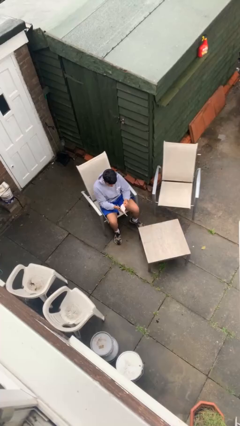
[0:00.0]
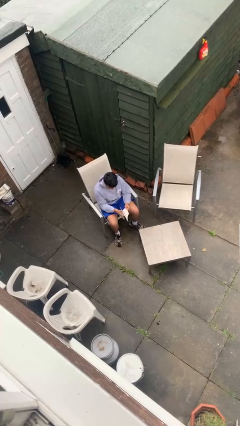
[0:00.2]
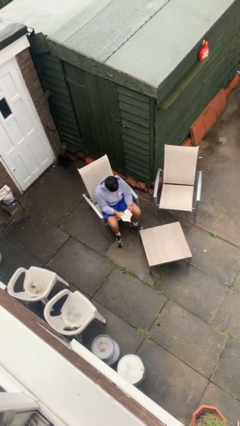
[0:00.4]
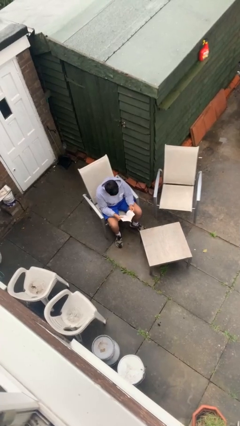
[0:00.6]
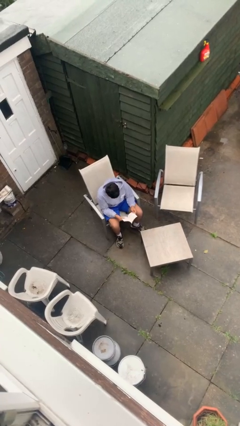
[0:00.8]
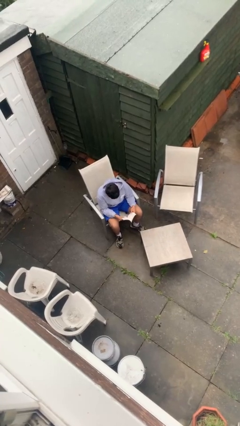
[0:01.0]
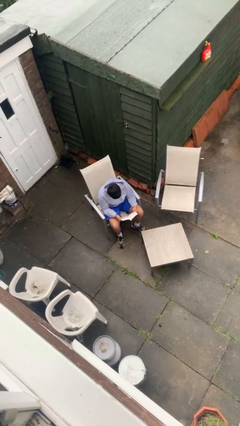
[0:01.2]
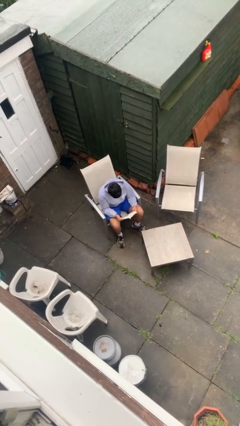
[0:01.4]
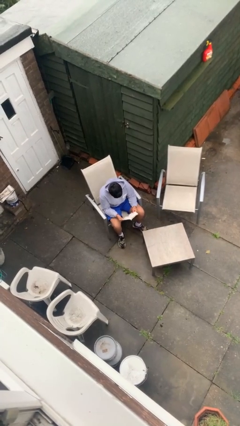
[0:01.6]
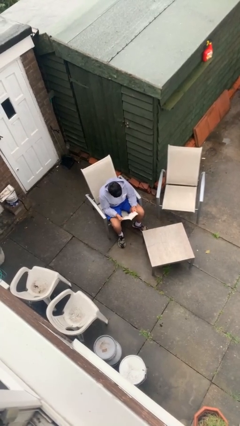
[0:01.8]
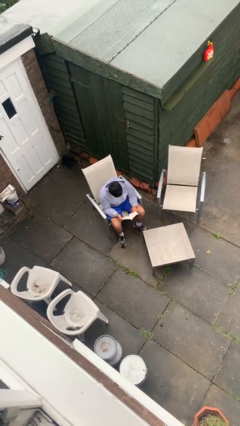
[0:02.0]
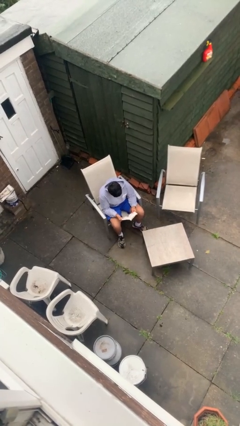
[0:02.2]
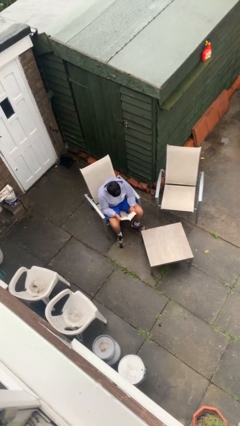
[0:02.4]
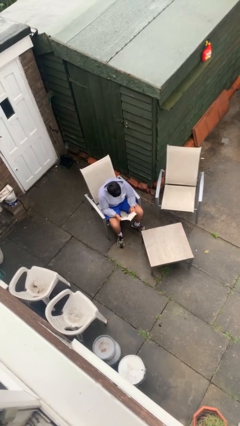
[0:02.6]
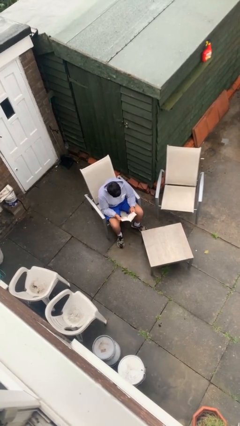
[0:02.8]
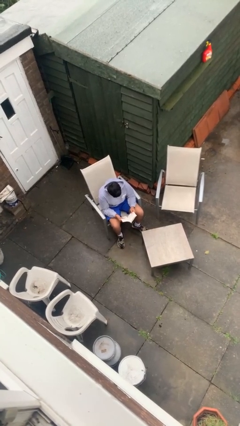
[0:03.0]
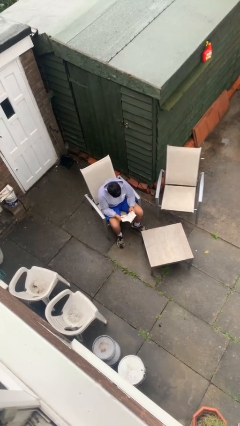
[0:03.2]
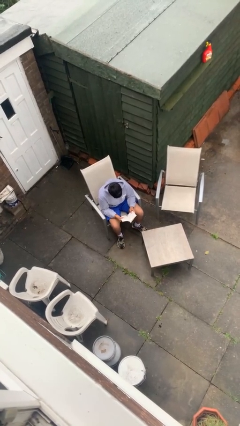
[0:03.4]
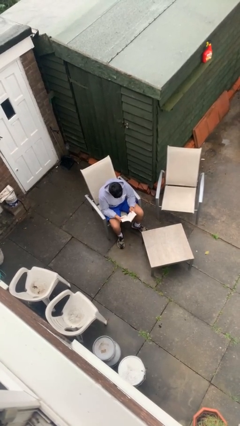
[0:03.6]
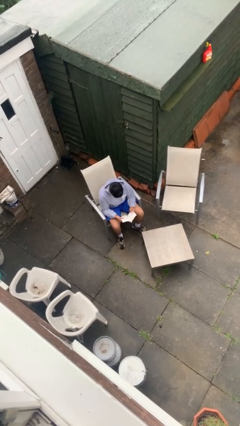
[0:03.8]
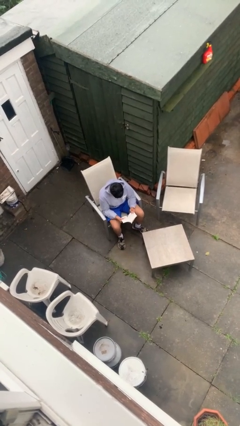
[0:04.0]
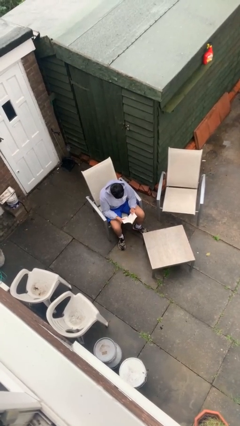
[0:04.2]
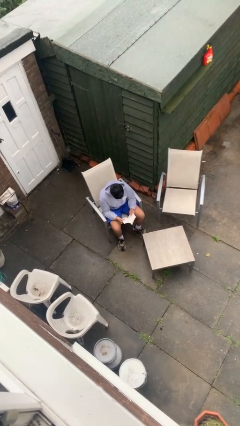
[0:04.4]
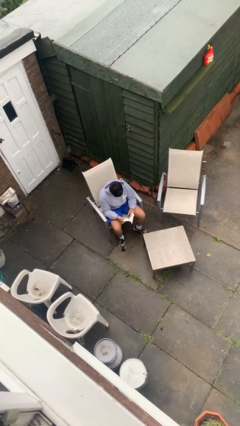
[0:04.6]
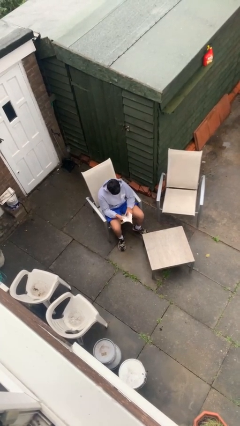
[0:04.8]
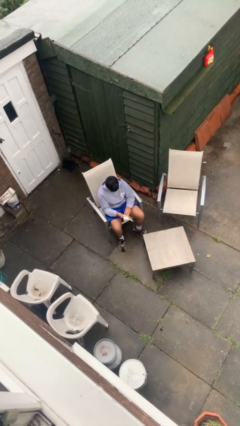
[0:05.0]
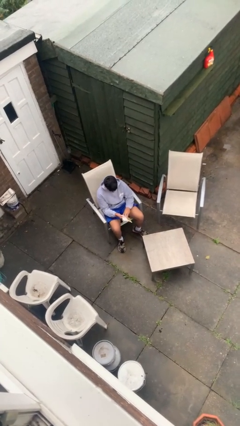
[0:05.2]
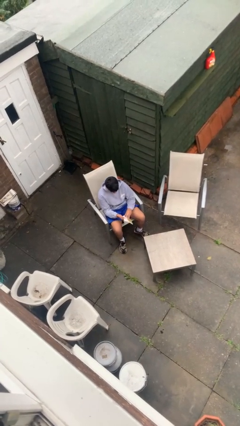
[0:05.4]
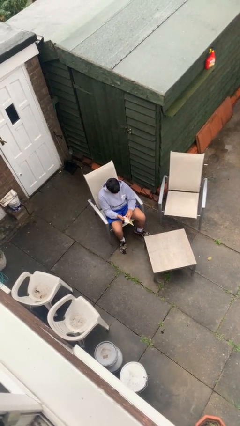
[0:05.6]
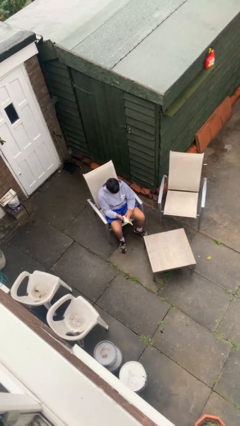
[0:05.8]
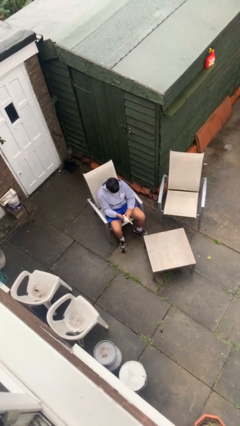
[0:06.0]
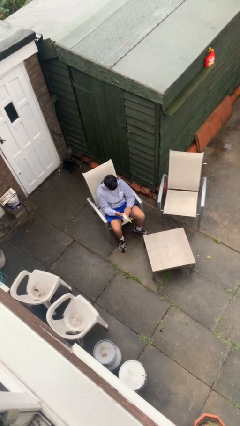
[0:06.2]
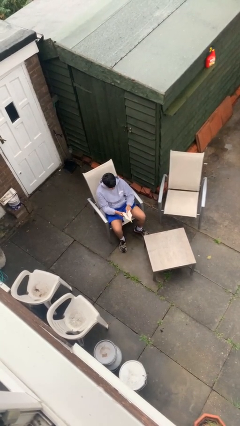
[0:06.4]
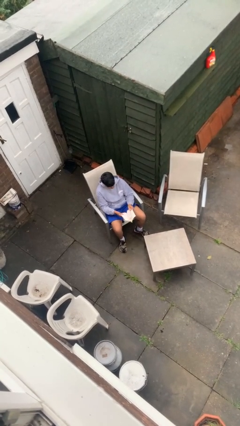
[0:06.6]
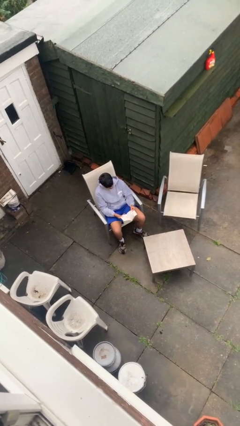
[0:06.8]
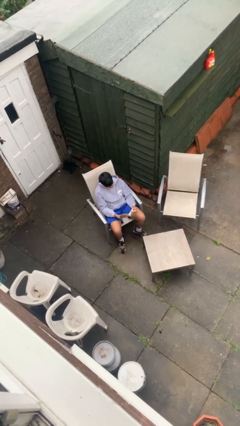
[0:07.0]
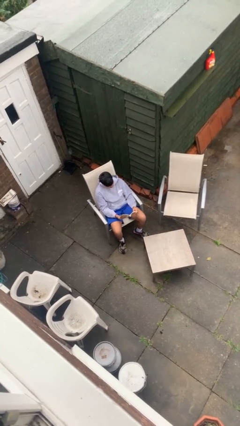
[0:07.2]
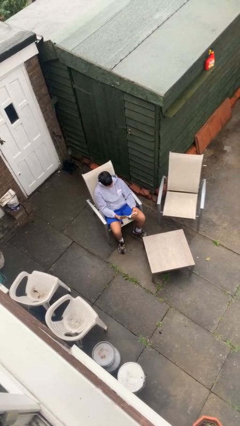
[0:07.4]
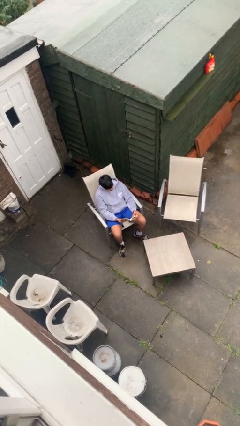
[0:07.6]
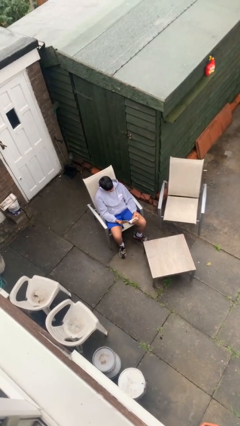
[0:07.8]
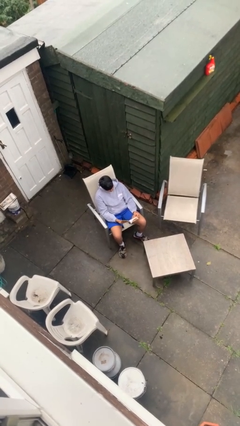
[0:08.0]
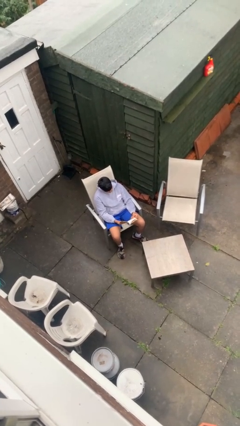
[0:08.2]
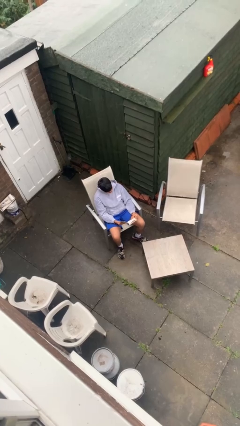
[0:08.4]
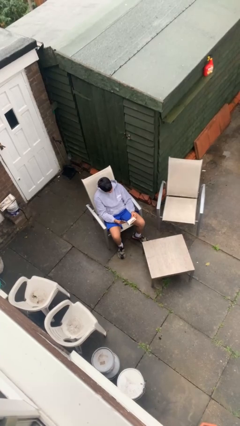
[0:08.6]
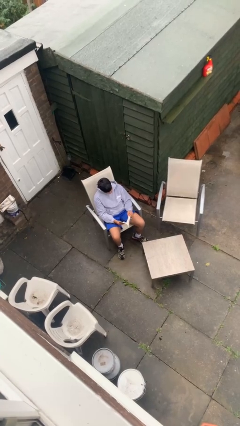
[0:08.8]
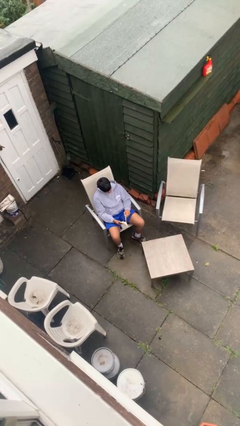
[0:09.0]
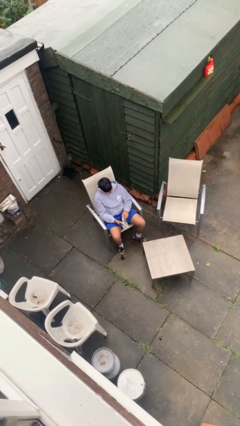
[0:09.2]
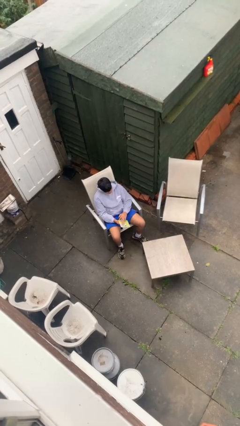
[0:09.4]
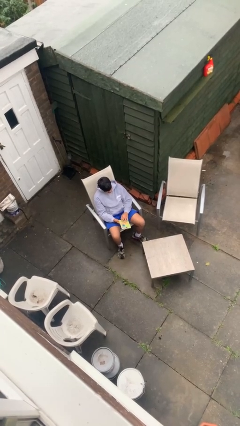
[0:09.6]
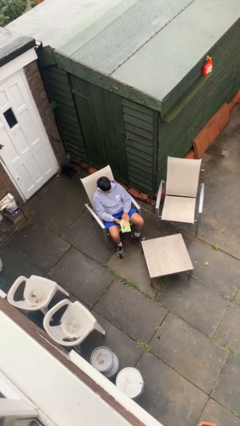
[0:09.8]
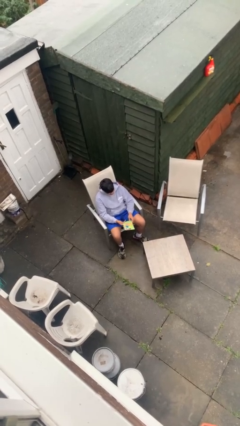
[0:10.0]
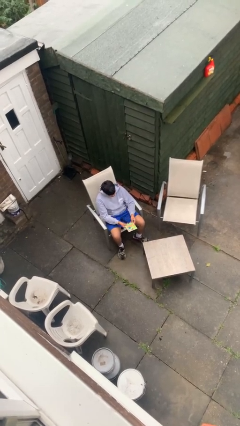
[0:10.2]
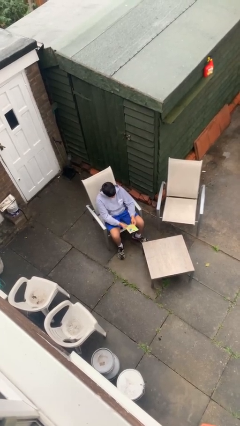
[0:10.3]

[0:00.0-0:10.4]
person reads document

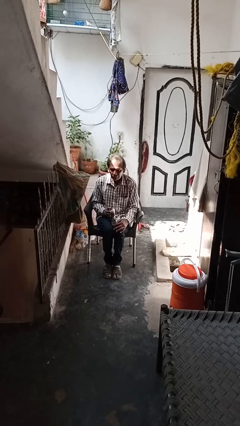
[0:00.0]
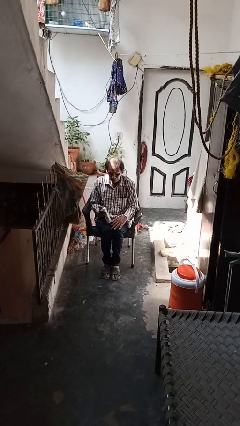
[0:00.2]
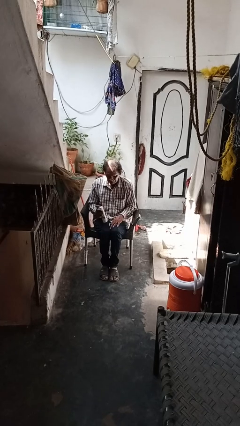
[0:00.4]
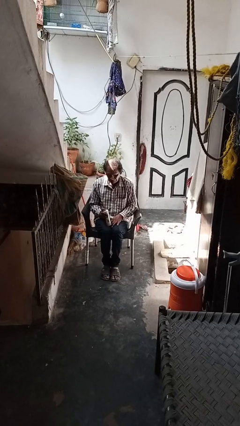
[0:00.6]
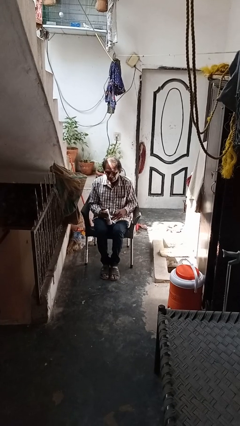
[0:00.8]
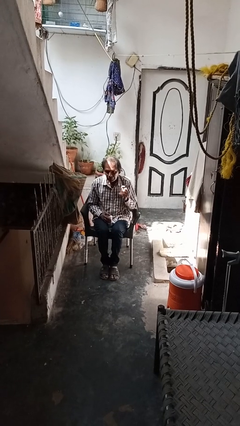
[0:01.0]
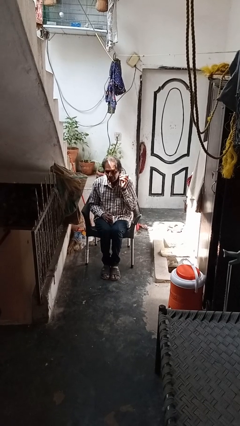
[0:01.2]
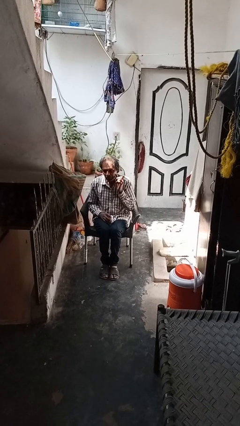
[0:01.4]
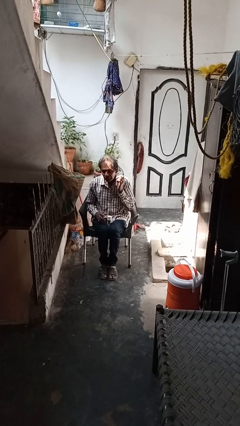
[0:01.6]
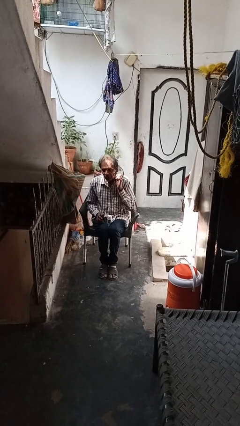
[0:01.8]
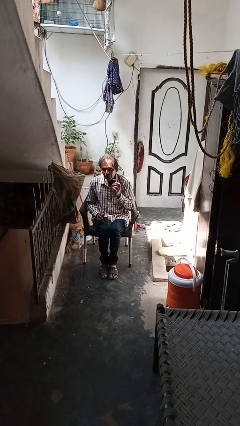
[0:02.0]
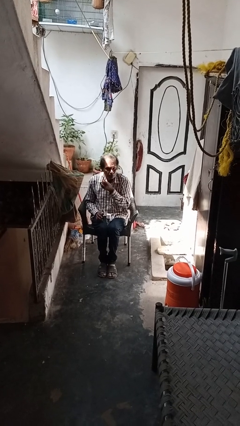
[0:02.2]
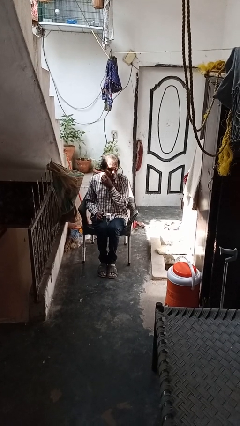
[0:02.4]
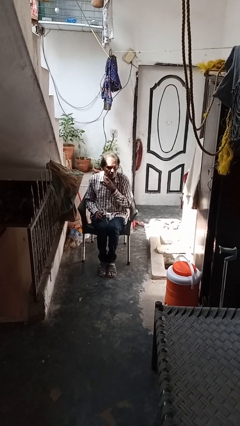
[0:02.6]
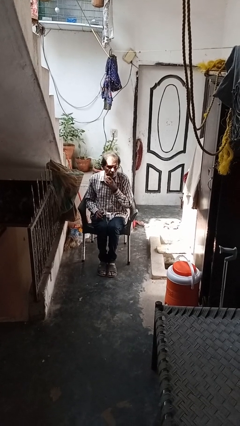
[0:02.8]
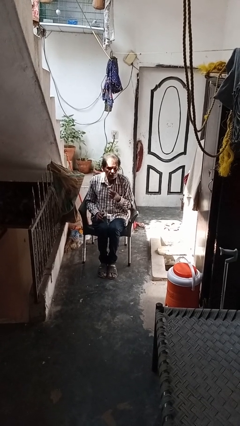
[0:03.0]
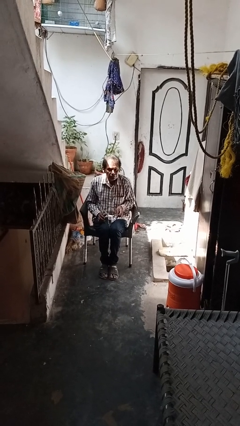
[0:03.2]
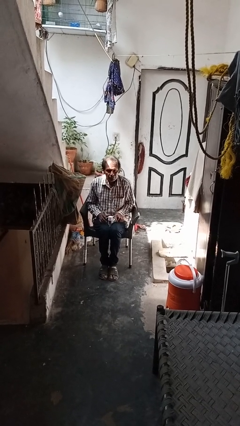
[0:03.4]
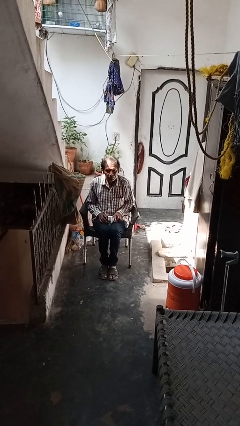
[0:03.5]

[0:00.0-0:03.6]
person shaves face

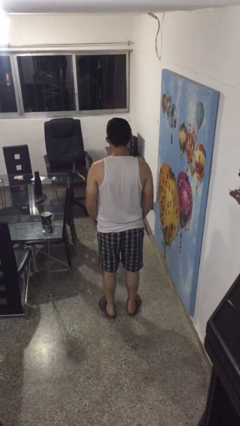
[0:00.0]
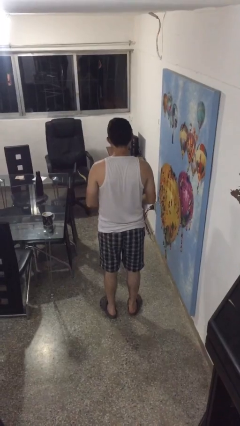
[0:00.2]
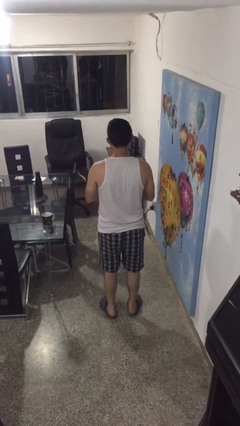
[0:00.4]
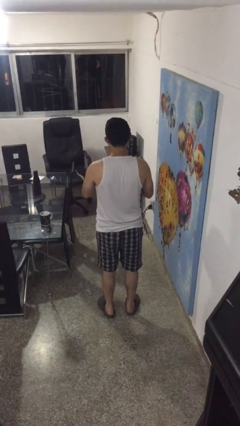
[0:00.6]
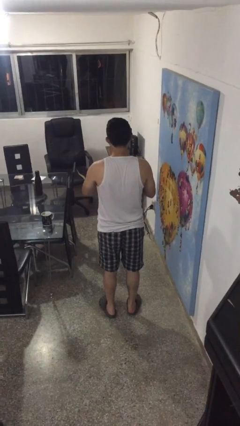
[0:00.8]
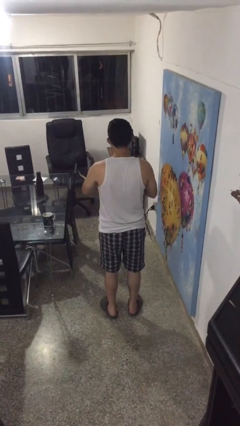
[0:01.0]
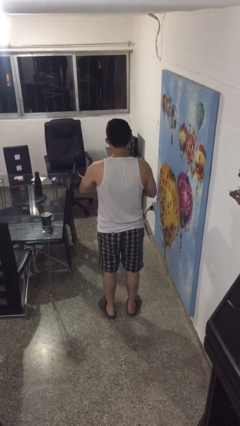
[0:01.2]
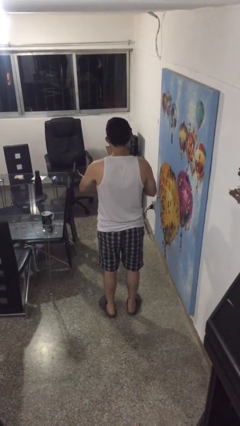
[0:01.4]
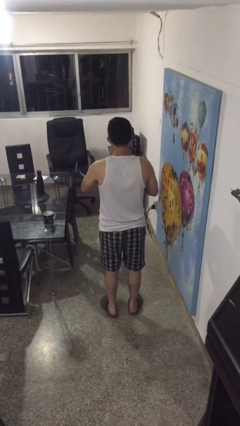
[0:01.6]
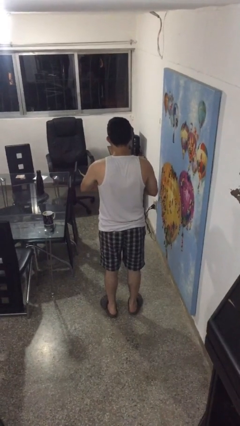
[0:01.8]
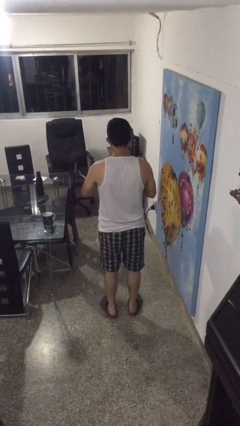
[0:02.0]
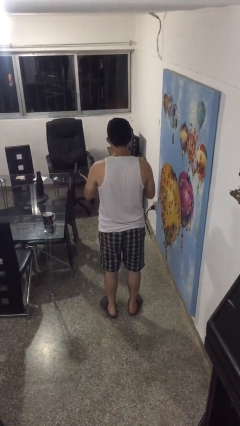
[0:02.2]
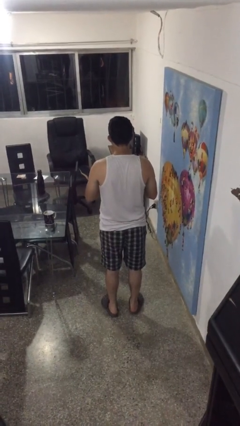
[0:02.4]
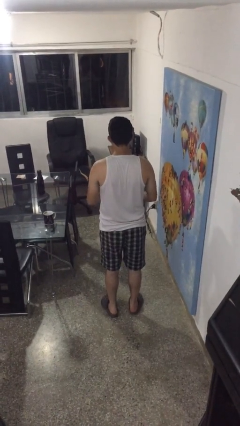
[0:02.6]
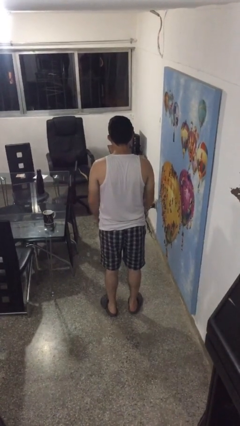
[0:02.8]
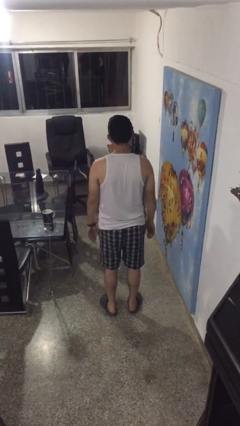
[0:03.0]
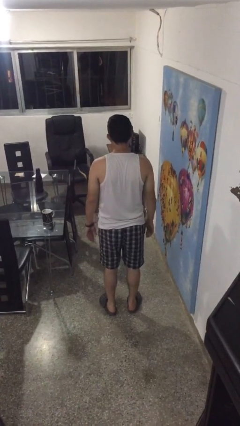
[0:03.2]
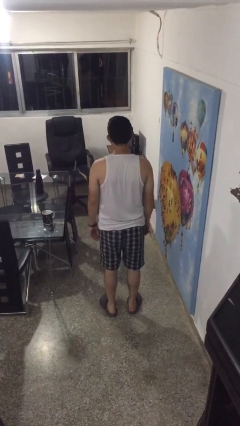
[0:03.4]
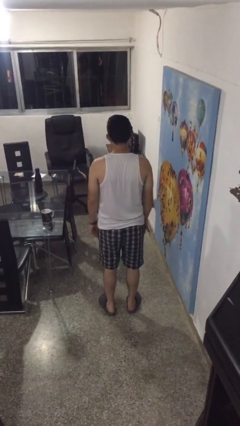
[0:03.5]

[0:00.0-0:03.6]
person cracks knuckles
